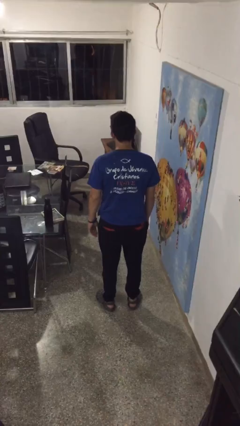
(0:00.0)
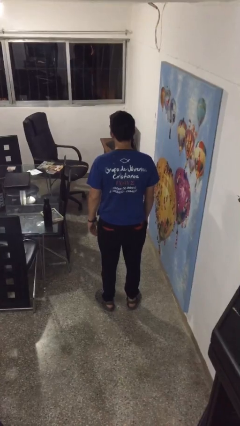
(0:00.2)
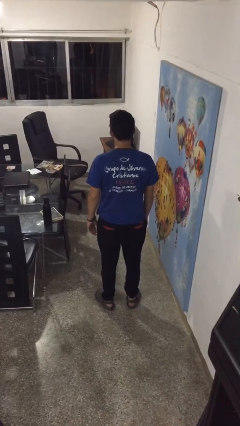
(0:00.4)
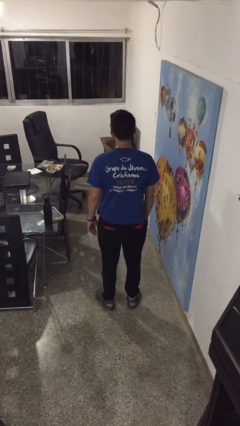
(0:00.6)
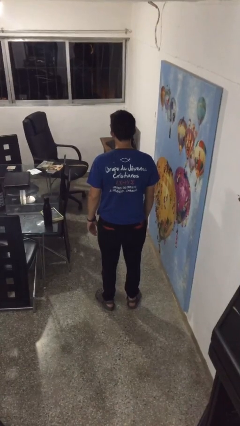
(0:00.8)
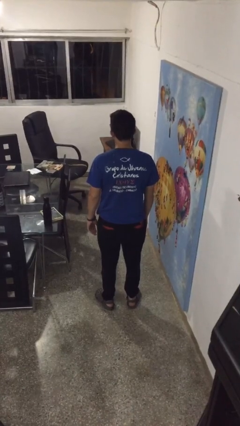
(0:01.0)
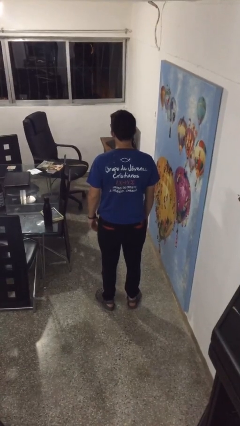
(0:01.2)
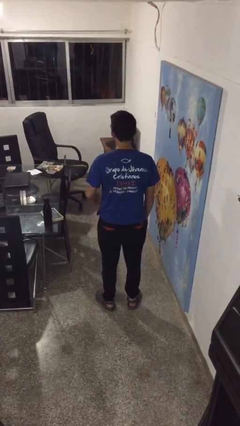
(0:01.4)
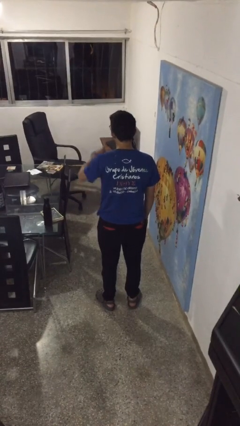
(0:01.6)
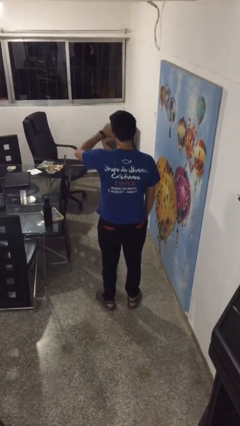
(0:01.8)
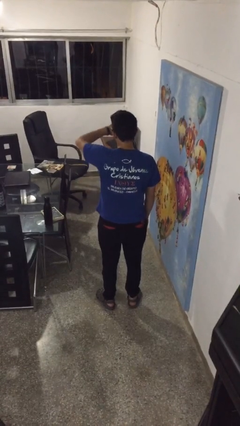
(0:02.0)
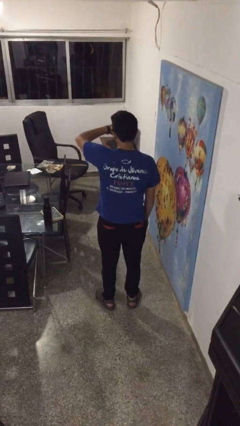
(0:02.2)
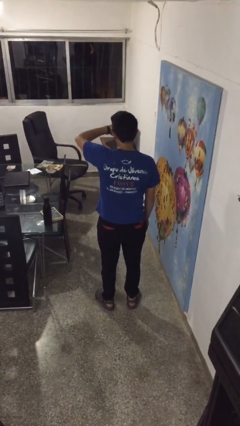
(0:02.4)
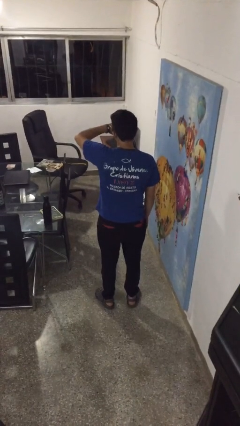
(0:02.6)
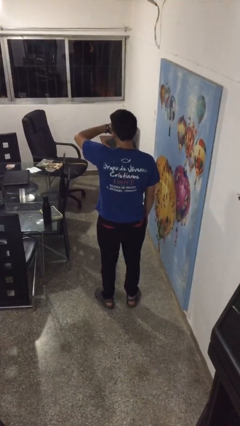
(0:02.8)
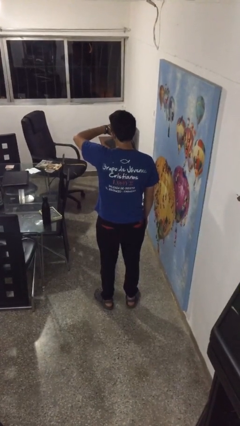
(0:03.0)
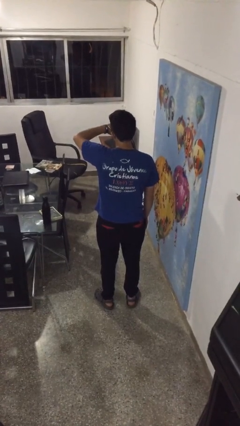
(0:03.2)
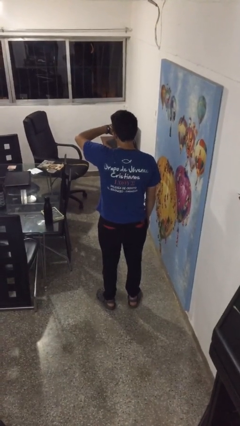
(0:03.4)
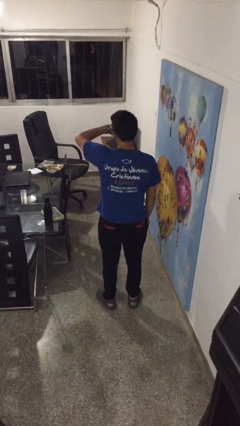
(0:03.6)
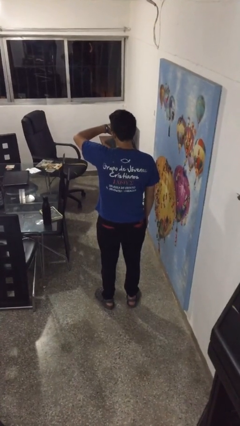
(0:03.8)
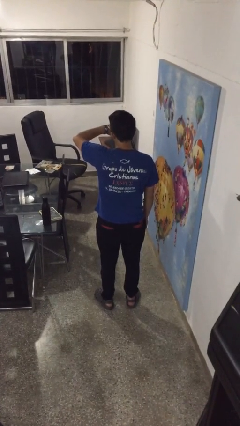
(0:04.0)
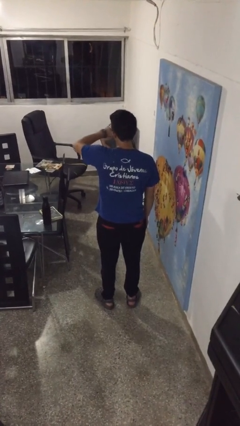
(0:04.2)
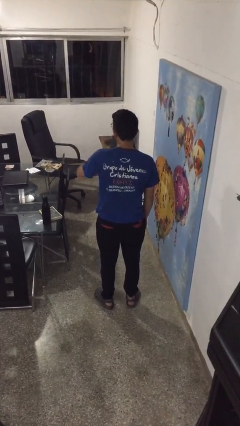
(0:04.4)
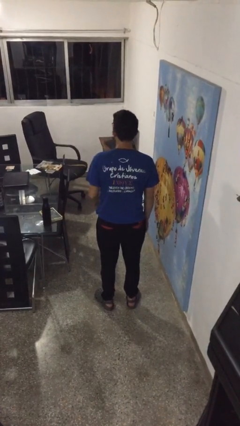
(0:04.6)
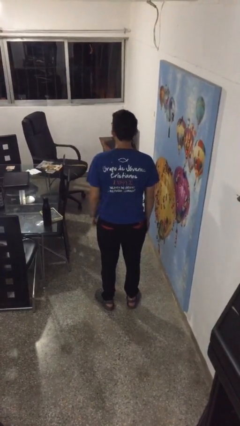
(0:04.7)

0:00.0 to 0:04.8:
person looks at wristwatch

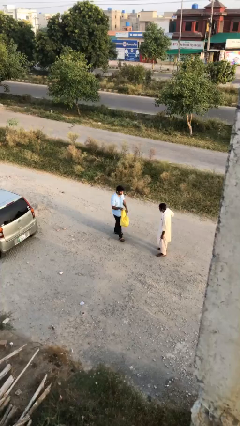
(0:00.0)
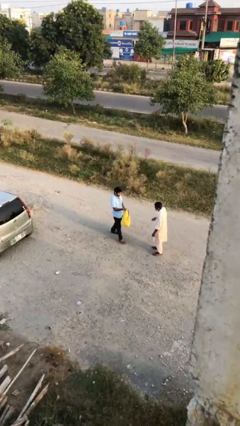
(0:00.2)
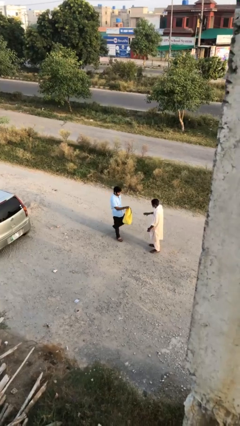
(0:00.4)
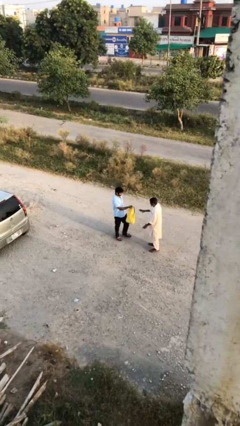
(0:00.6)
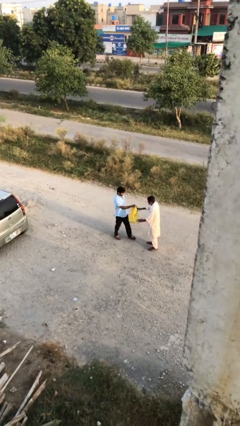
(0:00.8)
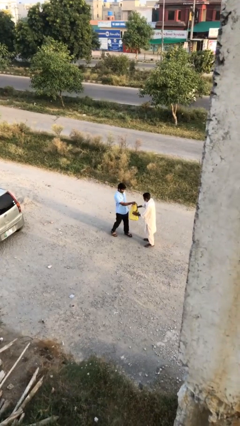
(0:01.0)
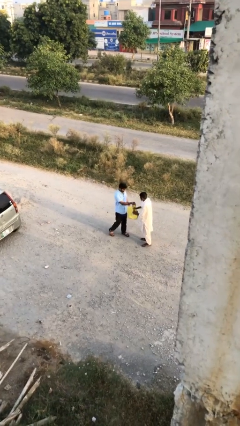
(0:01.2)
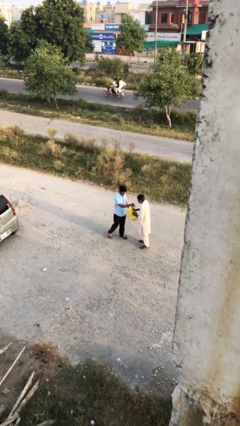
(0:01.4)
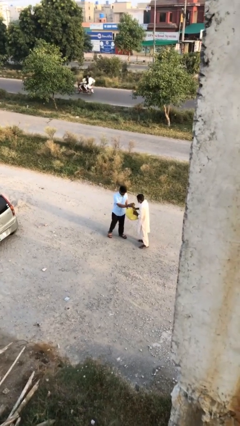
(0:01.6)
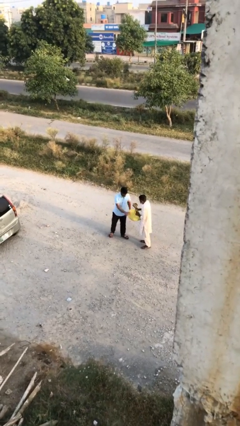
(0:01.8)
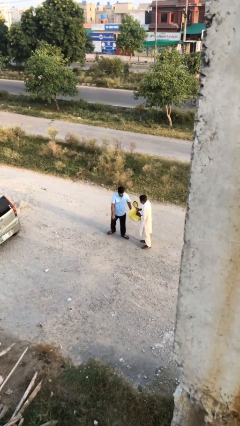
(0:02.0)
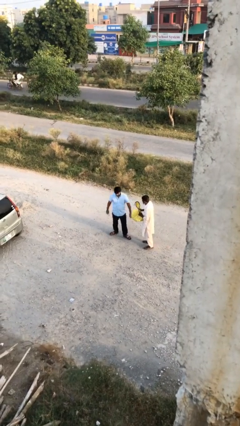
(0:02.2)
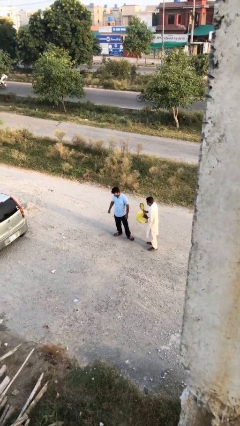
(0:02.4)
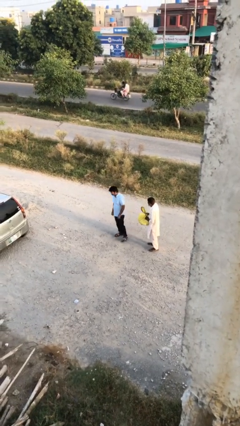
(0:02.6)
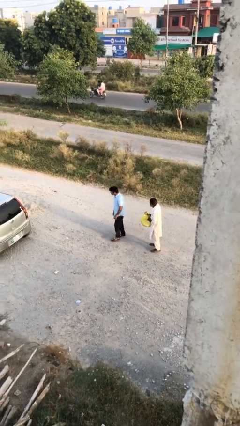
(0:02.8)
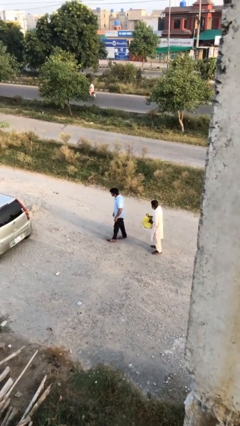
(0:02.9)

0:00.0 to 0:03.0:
person transfers object to person

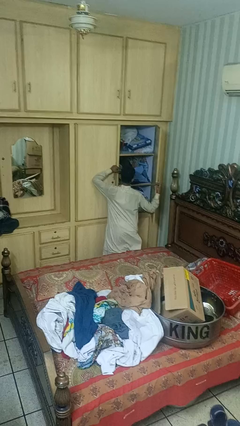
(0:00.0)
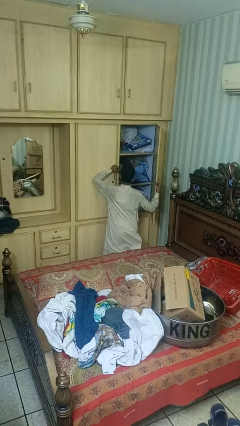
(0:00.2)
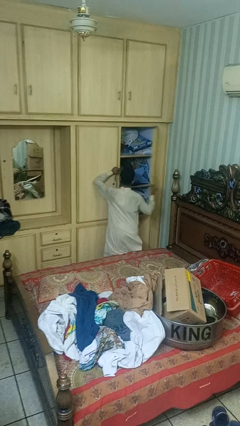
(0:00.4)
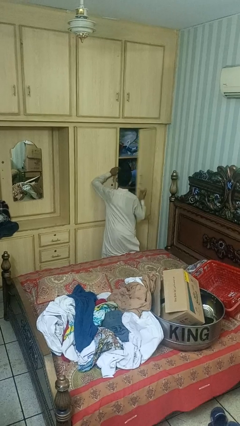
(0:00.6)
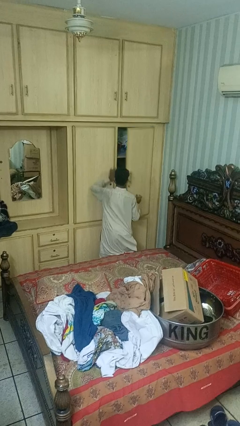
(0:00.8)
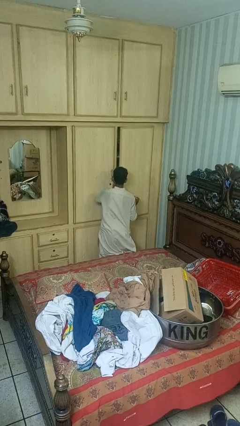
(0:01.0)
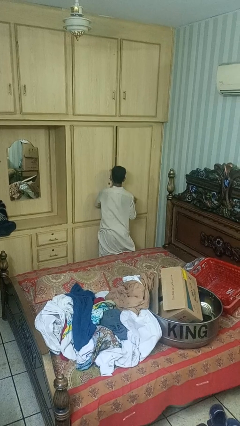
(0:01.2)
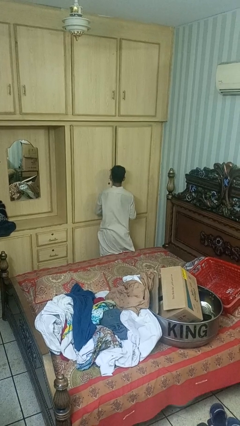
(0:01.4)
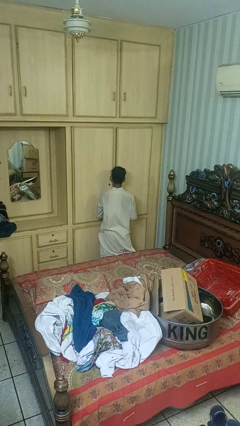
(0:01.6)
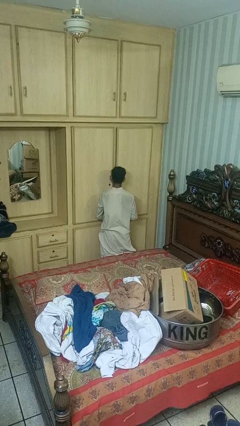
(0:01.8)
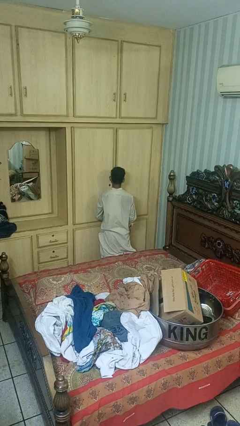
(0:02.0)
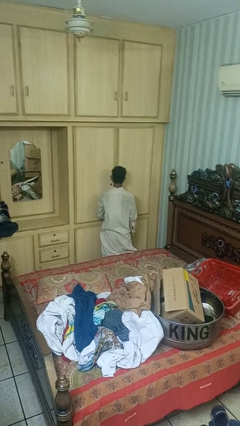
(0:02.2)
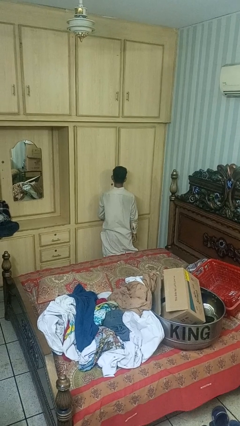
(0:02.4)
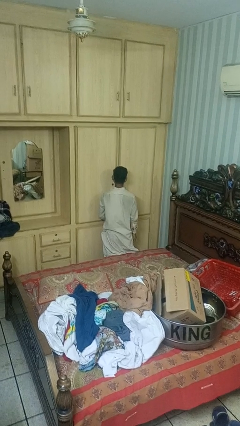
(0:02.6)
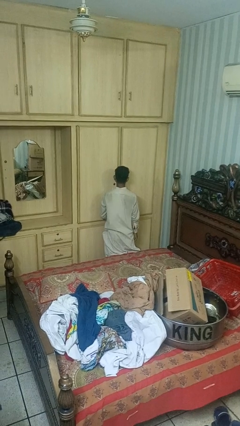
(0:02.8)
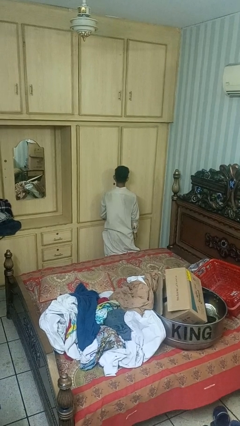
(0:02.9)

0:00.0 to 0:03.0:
person closes closet door

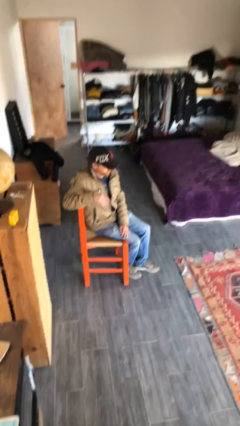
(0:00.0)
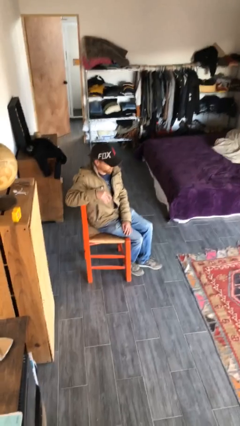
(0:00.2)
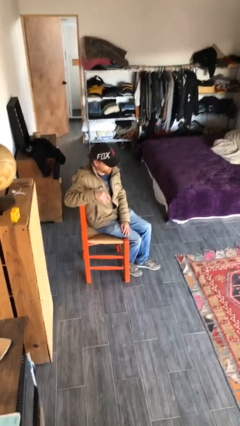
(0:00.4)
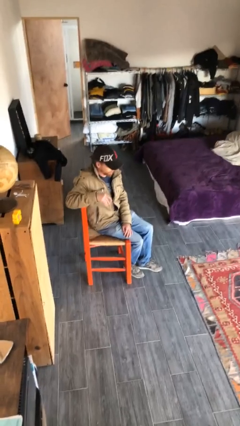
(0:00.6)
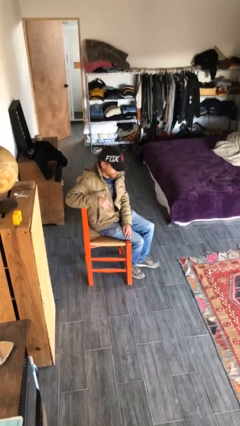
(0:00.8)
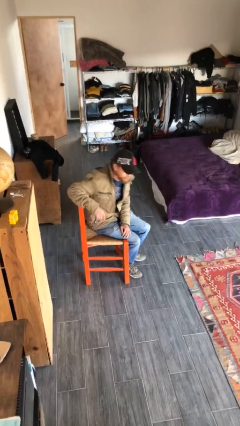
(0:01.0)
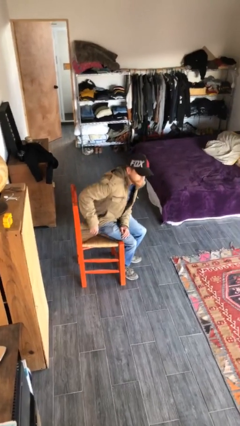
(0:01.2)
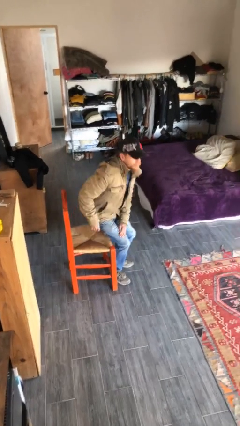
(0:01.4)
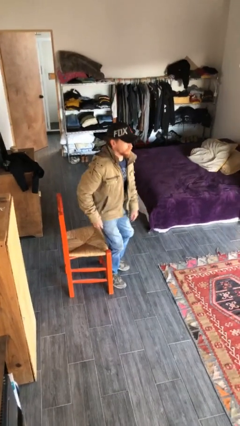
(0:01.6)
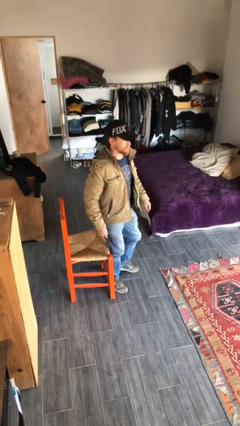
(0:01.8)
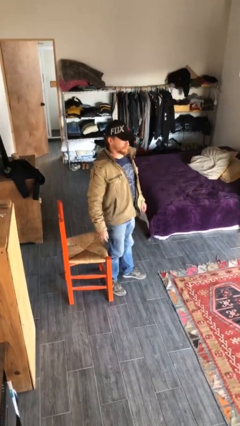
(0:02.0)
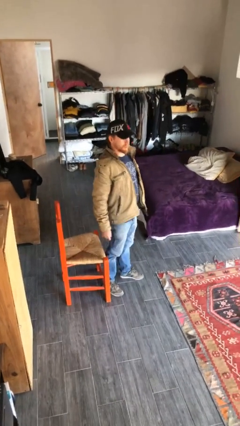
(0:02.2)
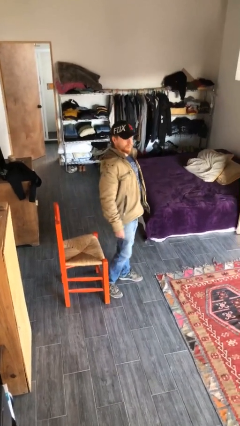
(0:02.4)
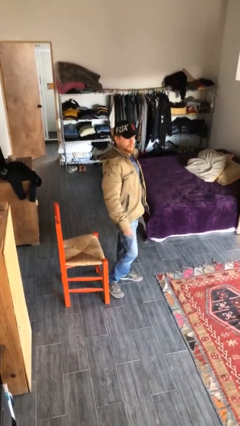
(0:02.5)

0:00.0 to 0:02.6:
person stands up

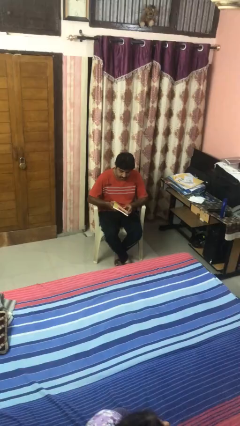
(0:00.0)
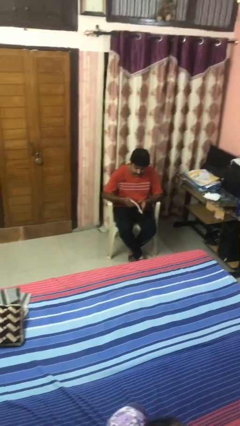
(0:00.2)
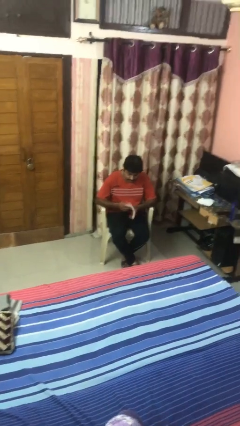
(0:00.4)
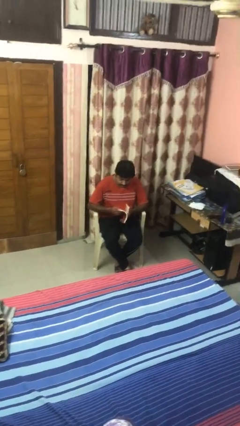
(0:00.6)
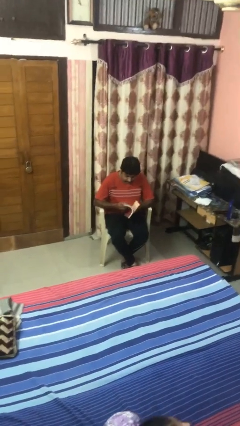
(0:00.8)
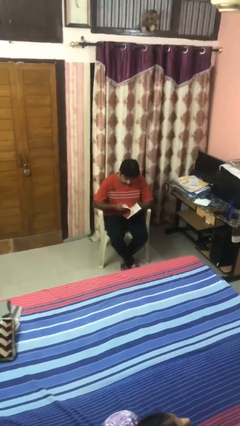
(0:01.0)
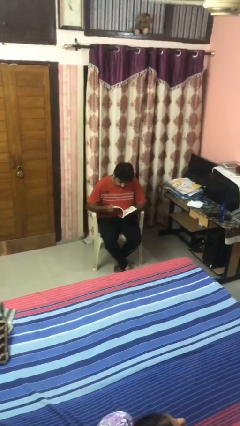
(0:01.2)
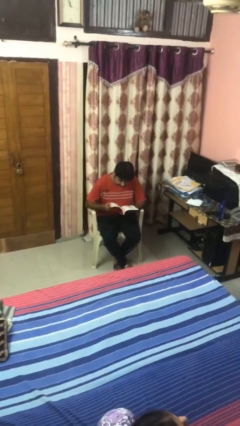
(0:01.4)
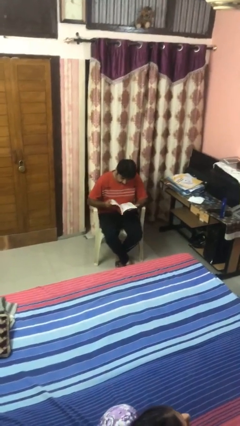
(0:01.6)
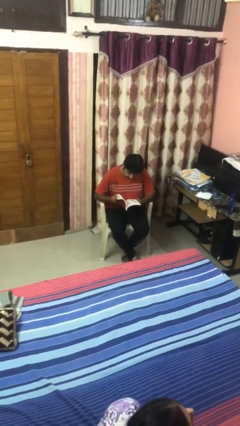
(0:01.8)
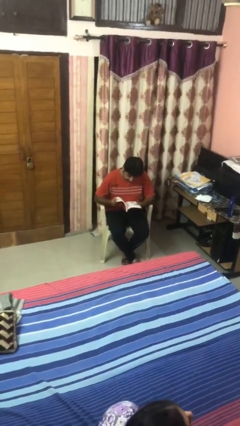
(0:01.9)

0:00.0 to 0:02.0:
person reads magazine

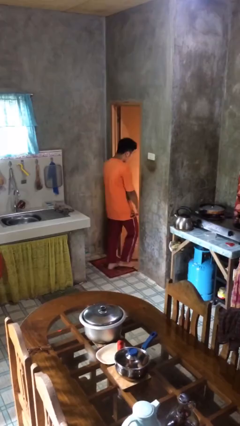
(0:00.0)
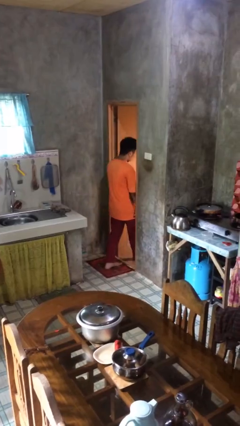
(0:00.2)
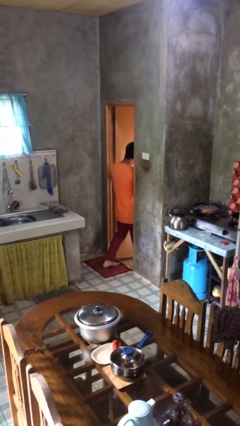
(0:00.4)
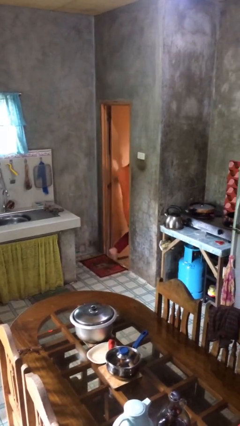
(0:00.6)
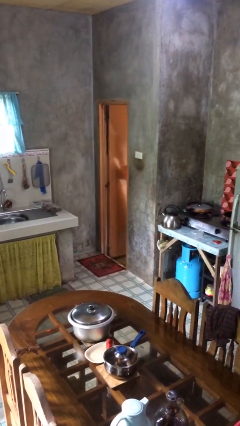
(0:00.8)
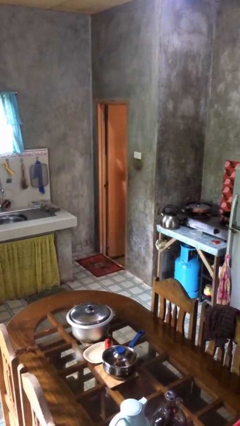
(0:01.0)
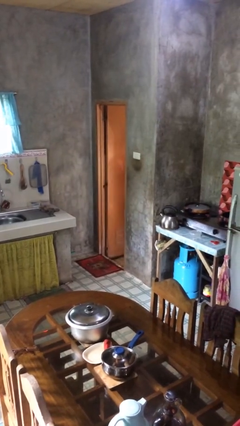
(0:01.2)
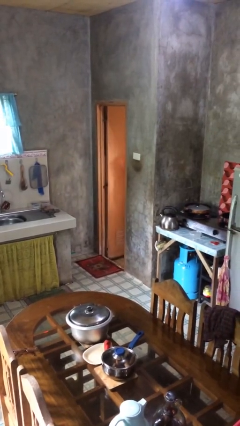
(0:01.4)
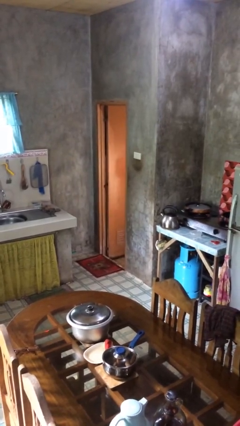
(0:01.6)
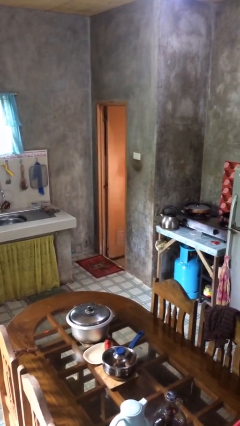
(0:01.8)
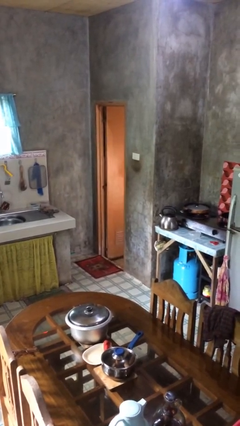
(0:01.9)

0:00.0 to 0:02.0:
person exits scene through structure
